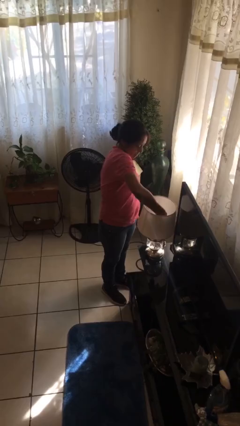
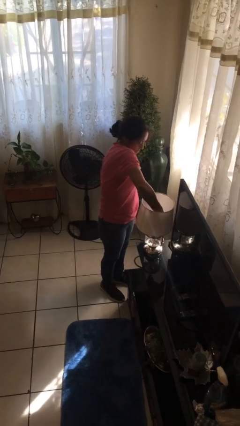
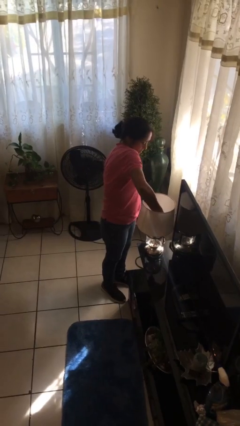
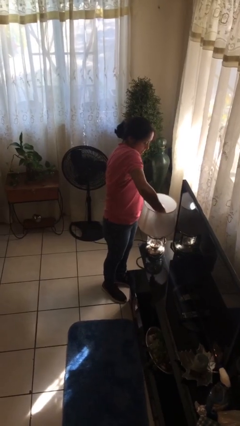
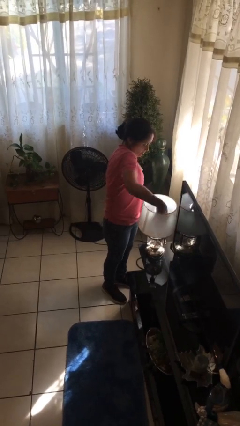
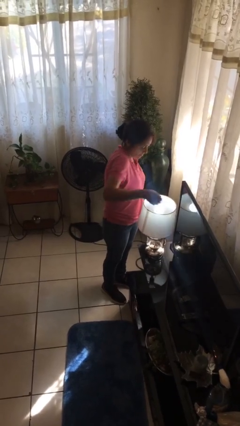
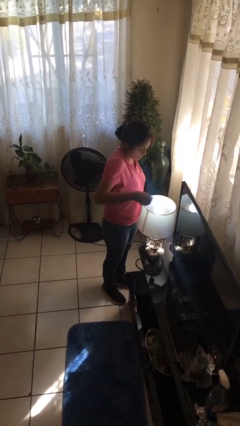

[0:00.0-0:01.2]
person turns on lamp

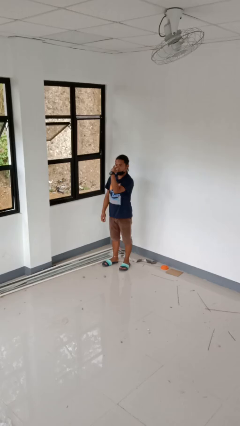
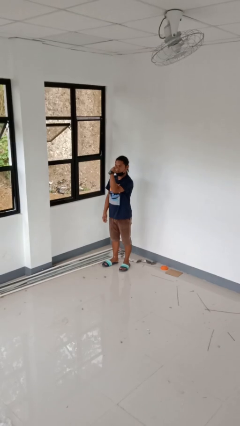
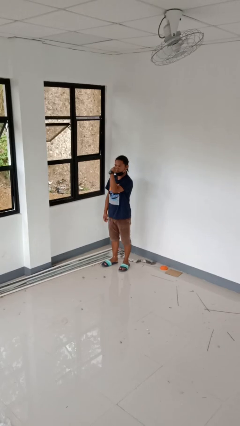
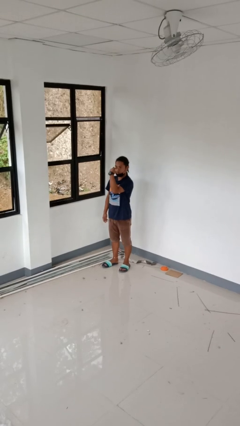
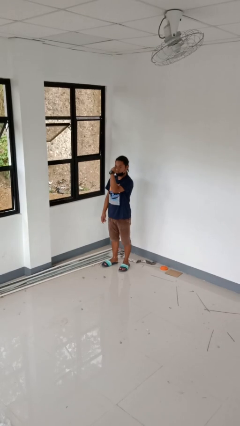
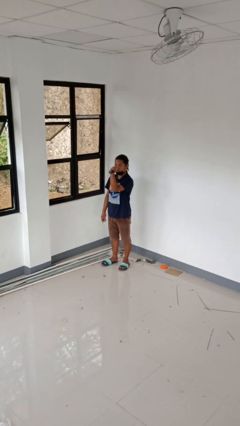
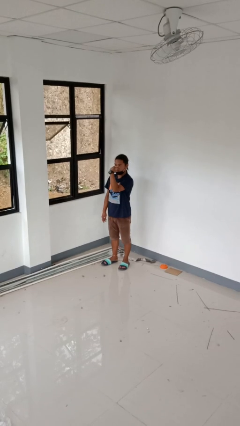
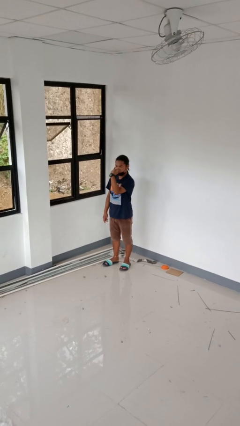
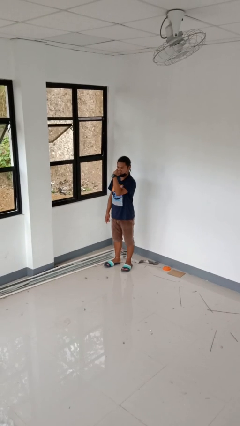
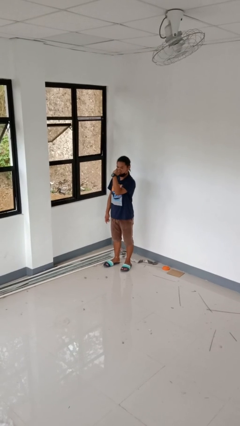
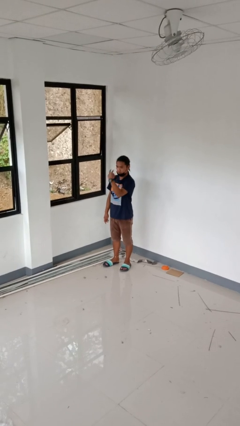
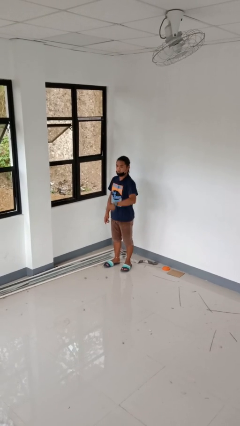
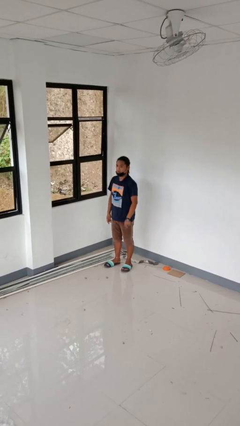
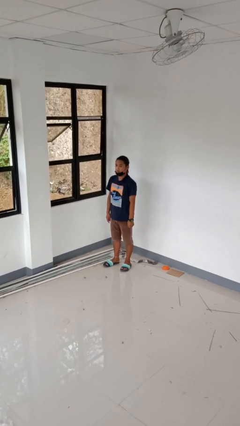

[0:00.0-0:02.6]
person gestures watch closely

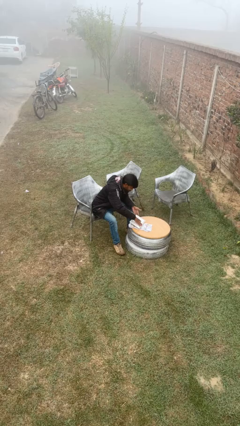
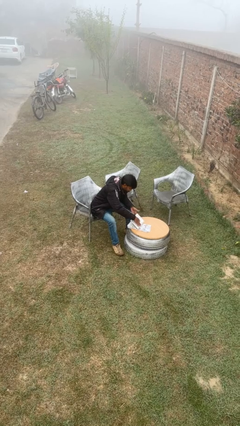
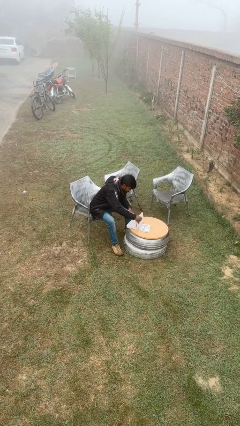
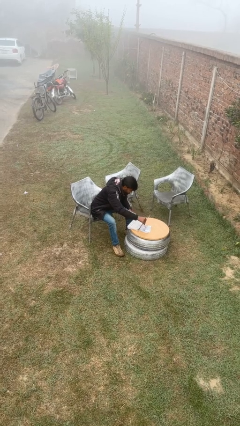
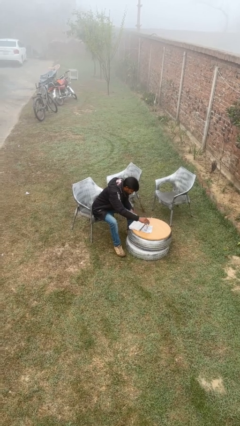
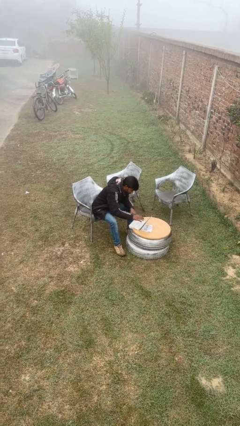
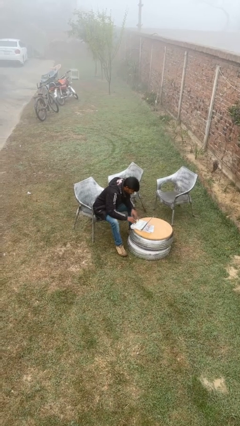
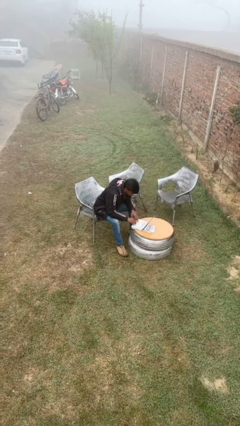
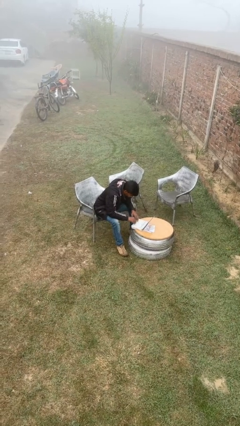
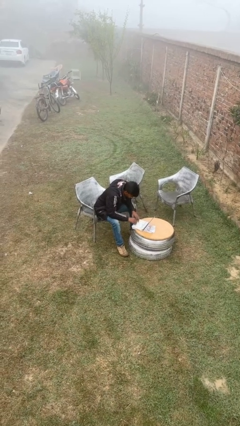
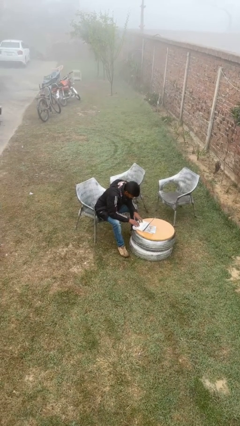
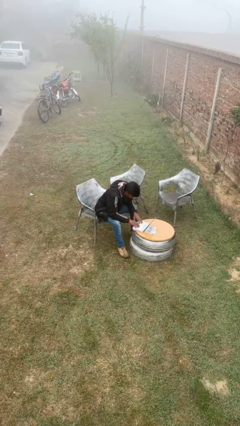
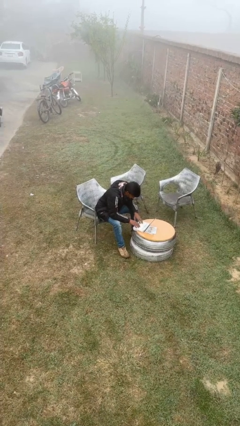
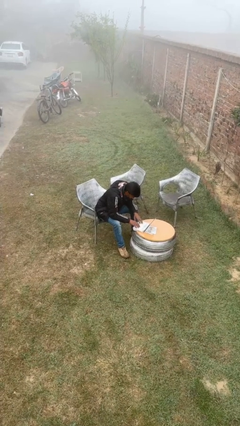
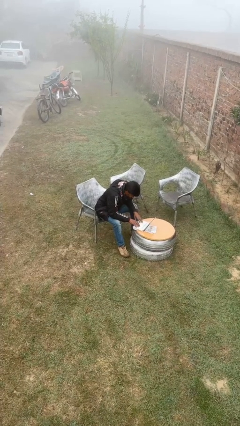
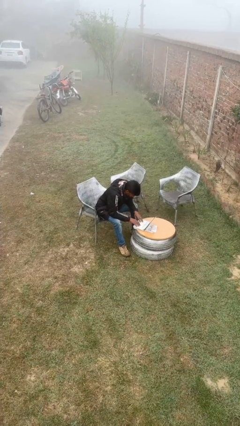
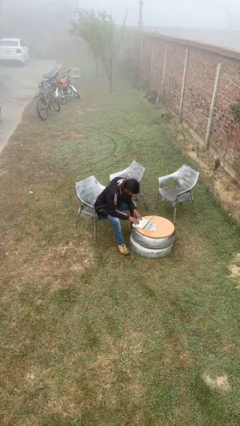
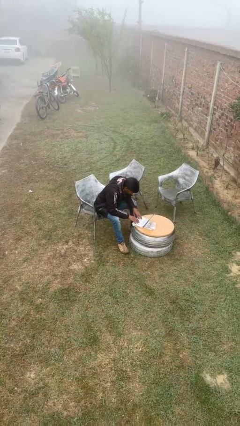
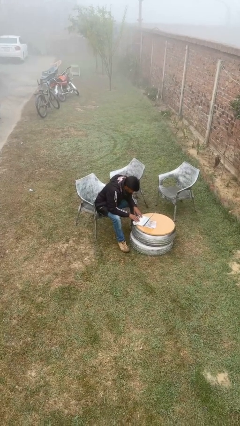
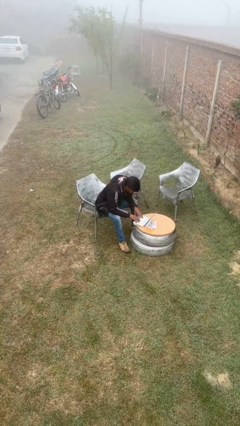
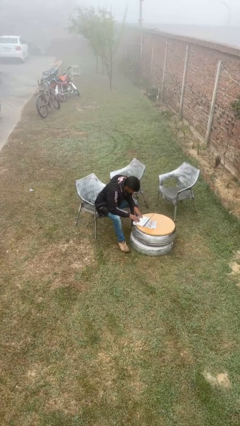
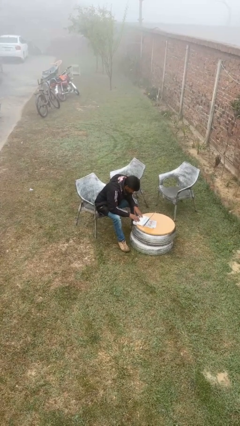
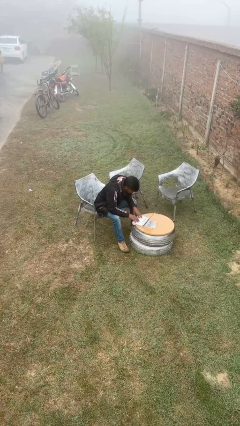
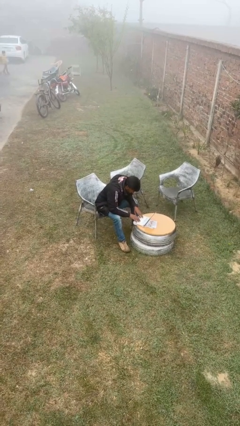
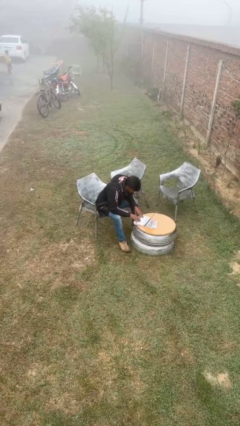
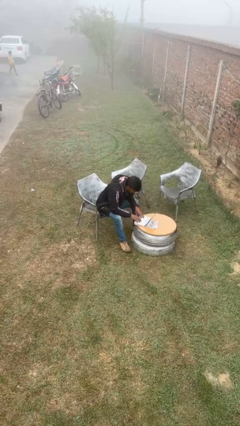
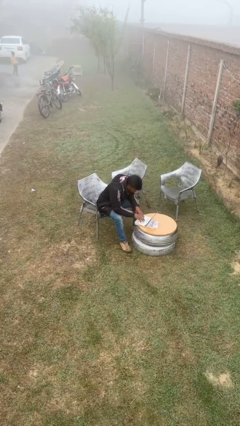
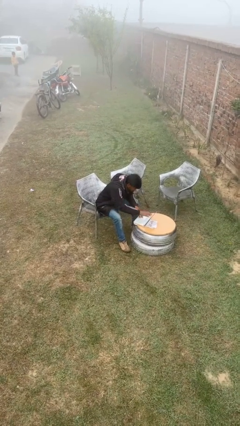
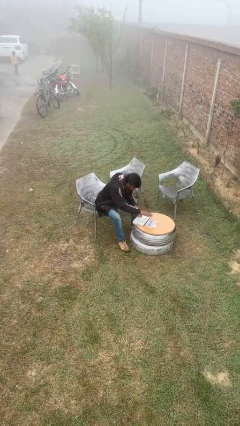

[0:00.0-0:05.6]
person interacts with laptop

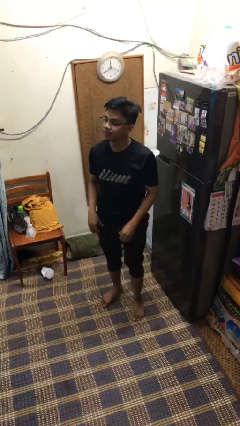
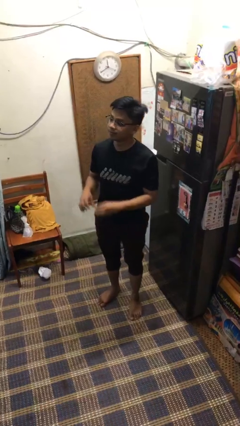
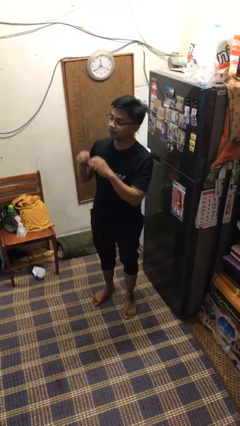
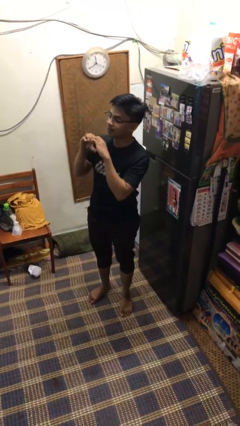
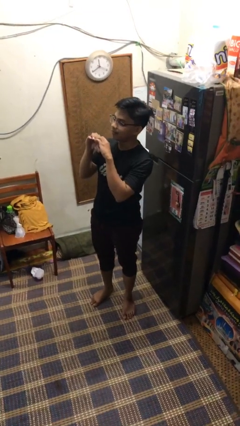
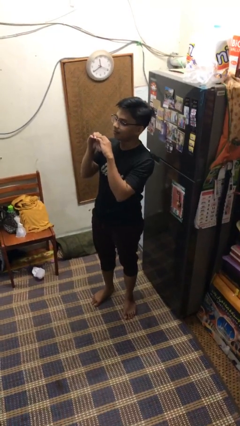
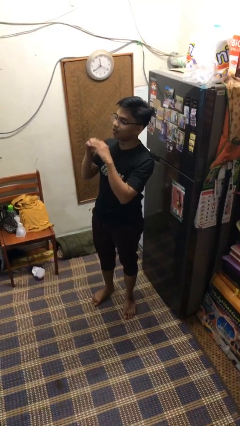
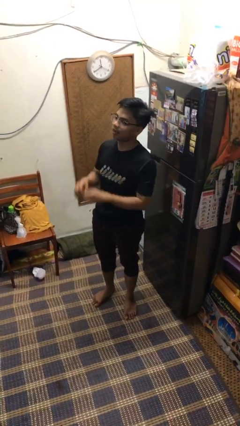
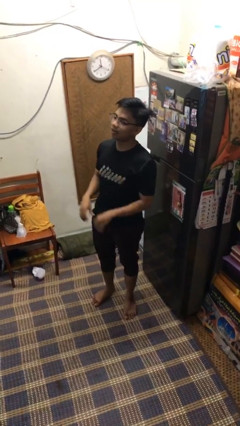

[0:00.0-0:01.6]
person gestures heart

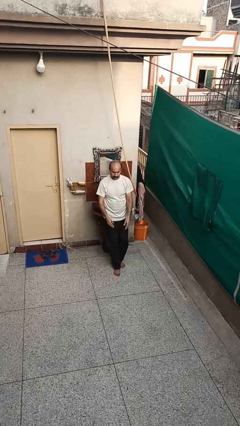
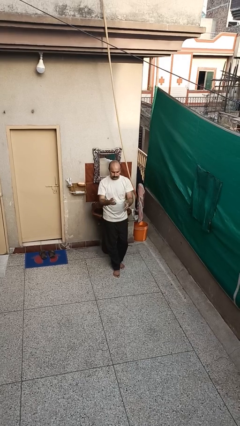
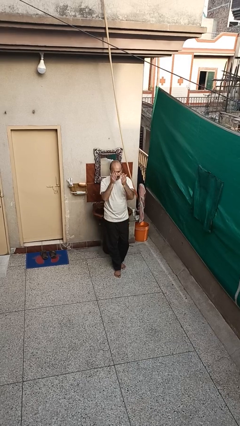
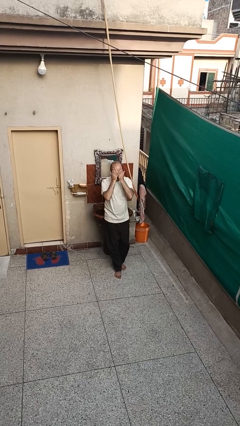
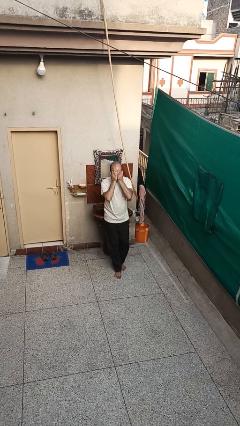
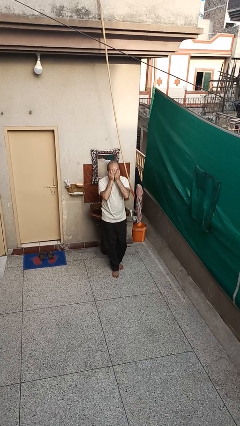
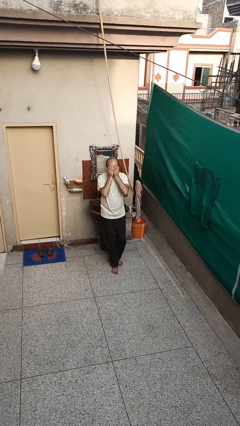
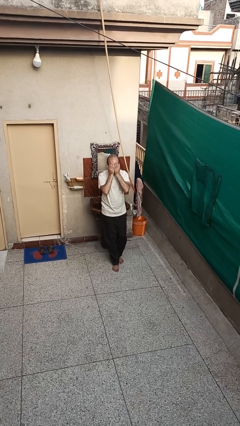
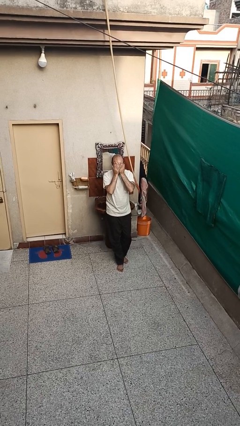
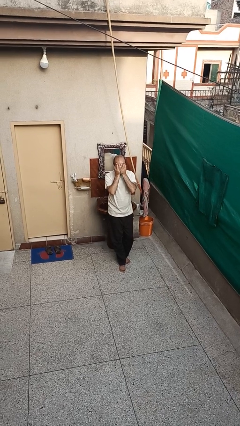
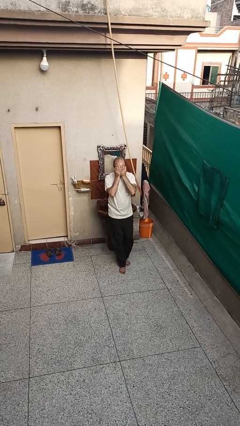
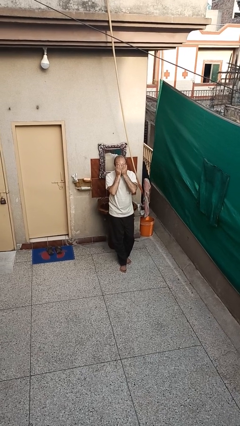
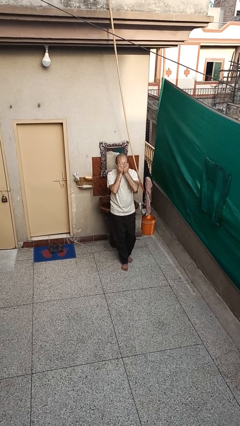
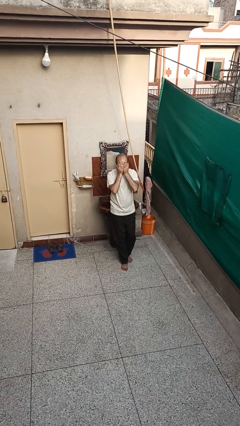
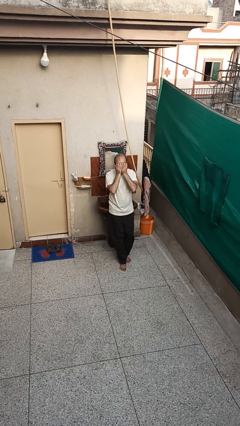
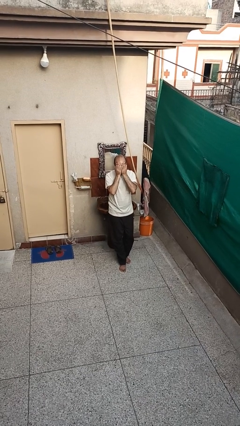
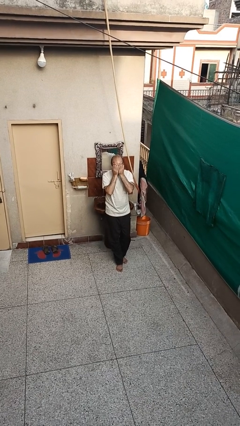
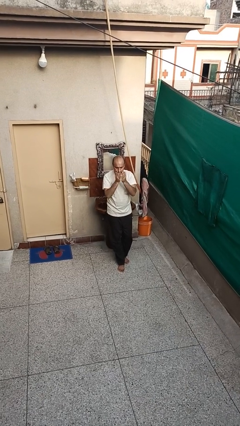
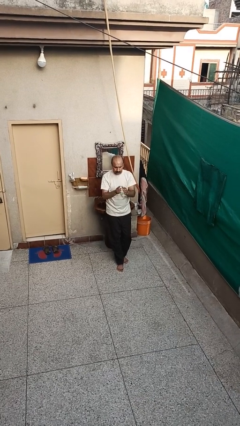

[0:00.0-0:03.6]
person covers face with hands

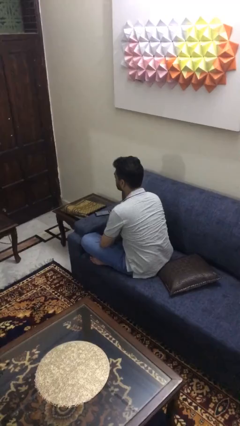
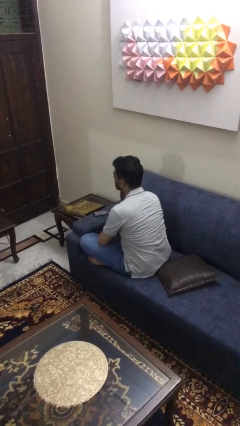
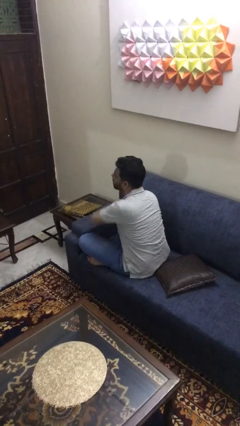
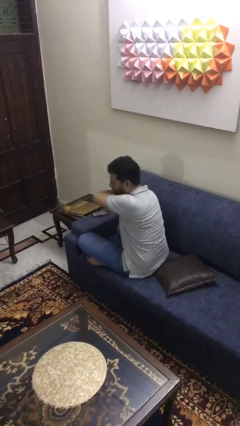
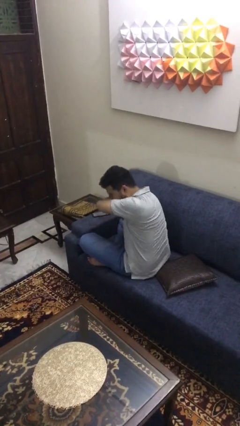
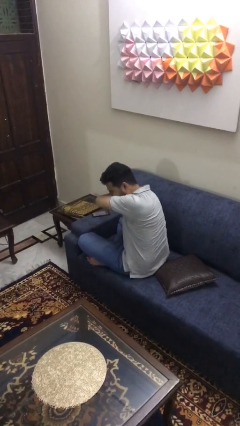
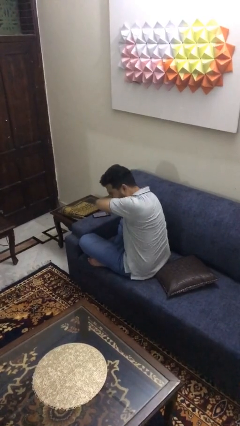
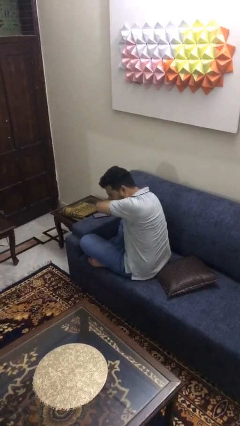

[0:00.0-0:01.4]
person sneezes into arm

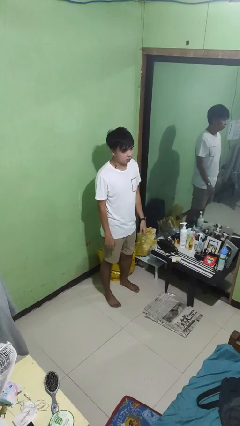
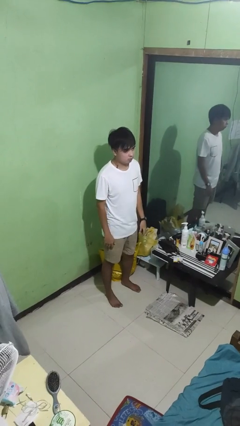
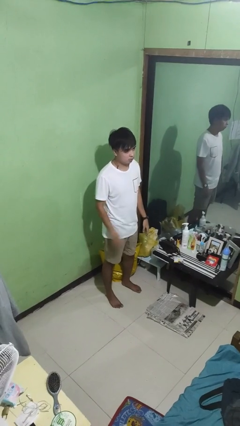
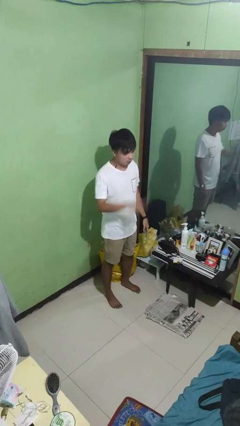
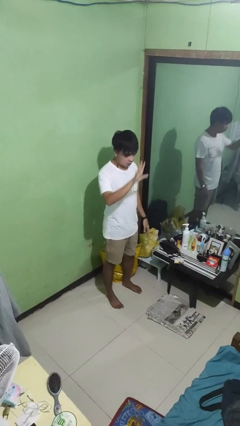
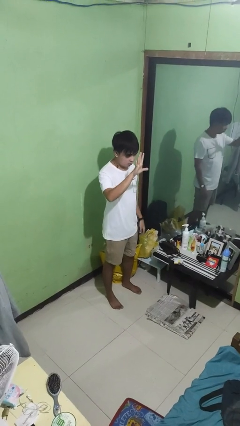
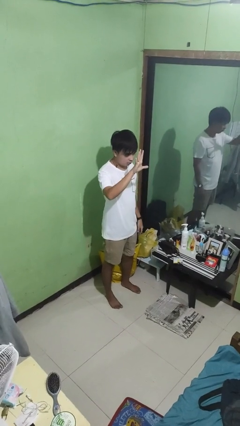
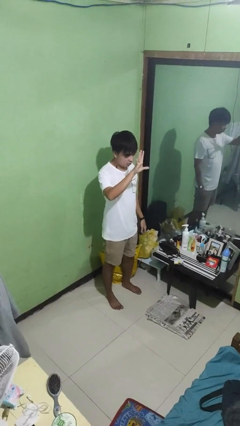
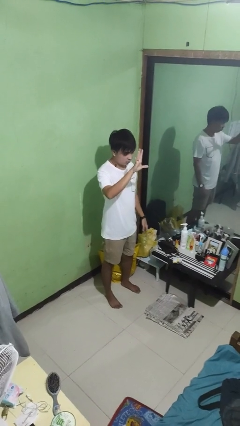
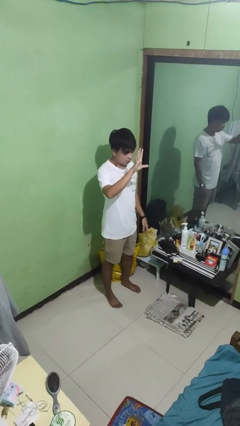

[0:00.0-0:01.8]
person gestures number five
